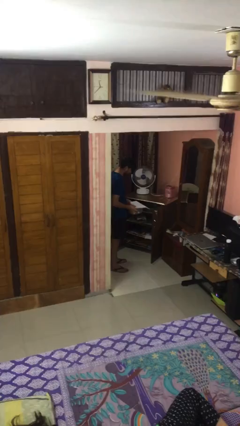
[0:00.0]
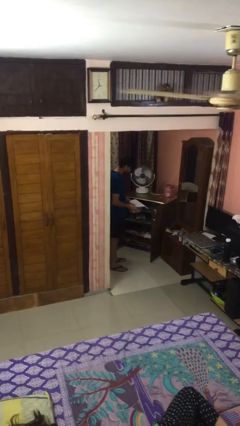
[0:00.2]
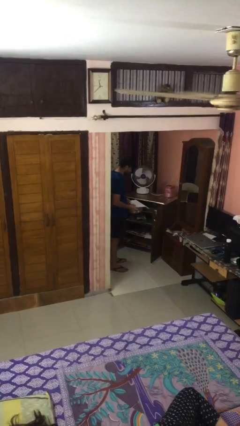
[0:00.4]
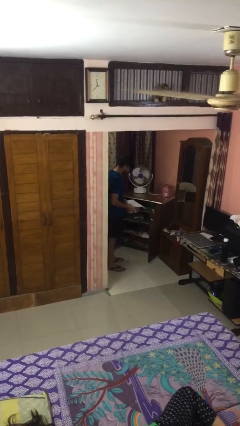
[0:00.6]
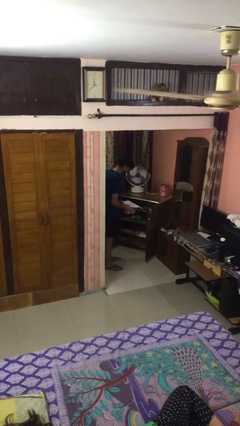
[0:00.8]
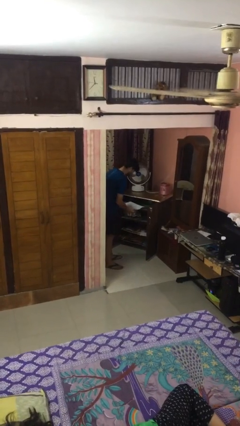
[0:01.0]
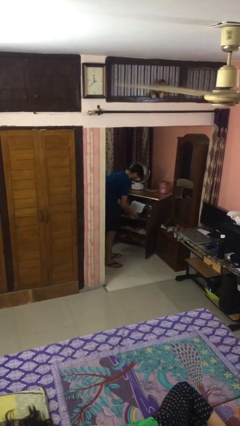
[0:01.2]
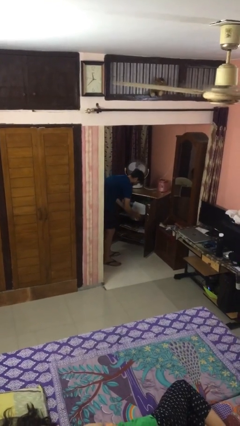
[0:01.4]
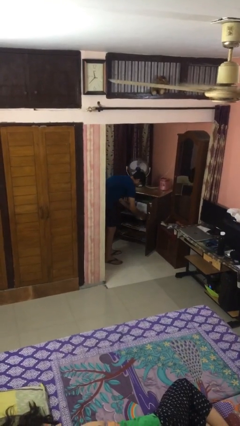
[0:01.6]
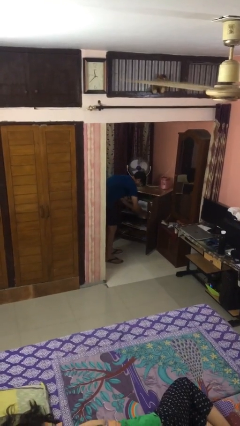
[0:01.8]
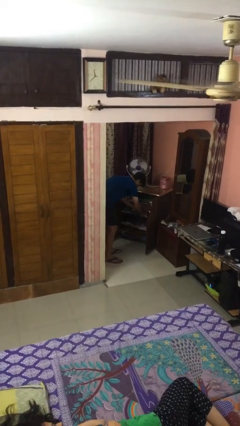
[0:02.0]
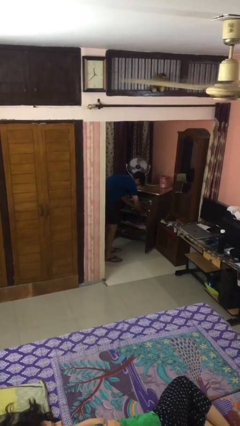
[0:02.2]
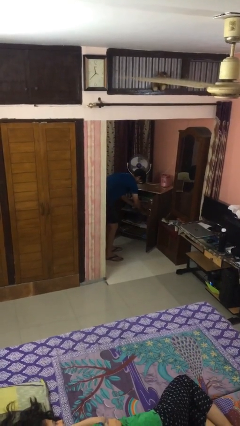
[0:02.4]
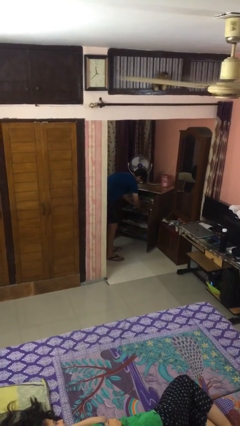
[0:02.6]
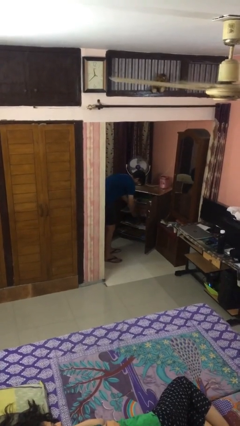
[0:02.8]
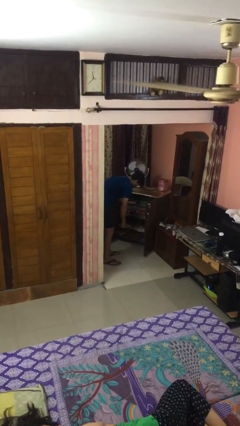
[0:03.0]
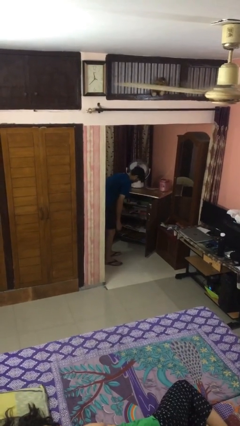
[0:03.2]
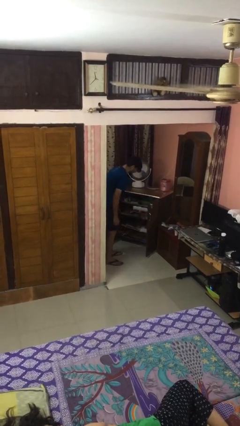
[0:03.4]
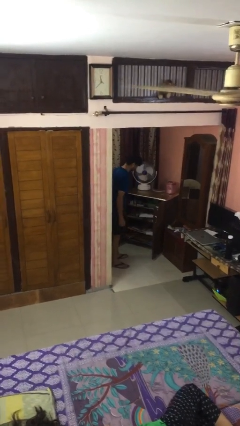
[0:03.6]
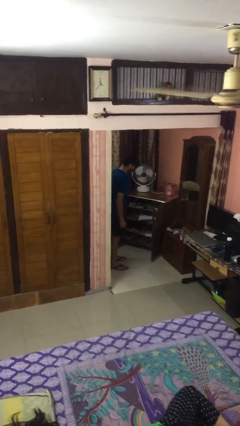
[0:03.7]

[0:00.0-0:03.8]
person puts down object into cabinet

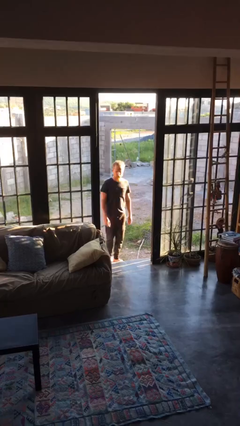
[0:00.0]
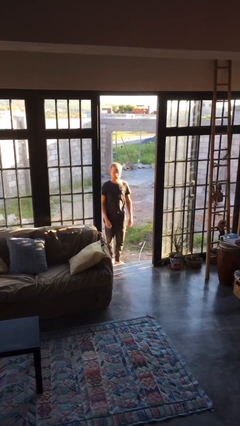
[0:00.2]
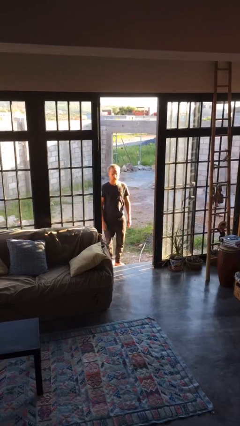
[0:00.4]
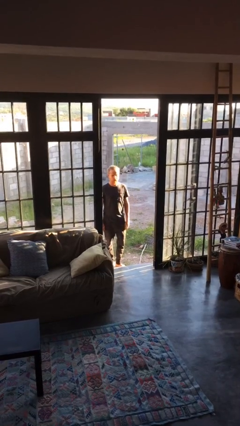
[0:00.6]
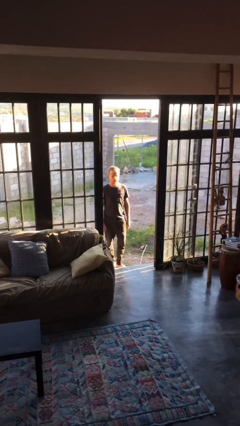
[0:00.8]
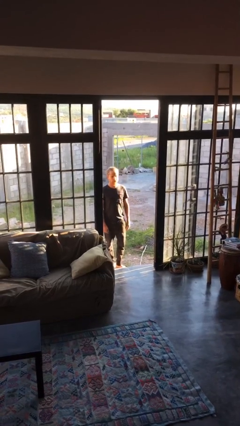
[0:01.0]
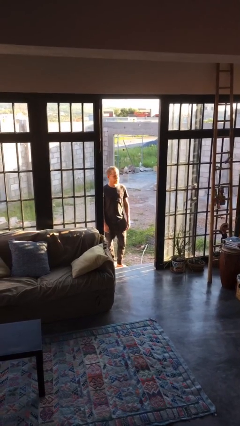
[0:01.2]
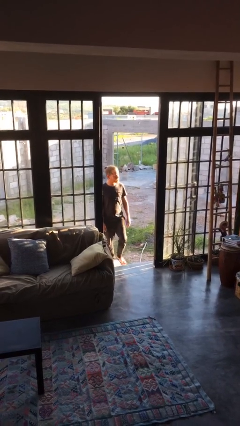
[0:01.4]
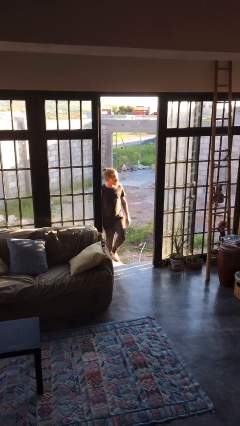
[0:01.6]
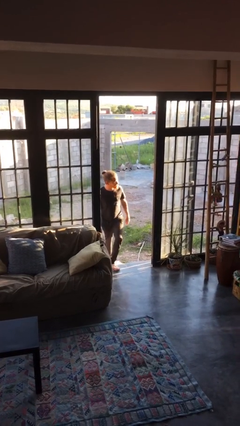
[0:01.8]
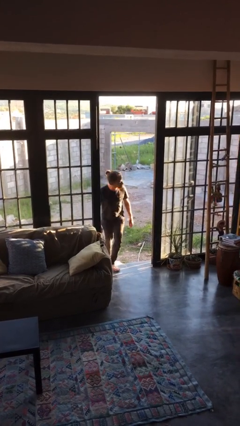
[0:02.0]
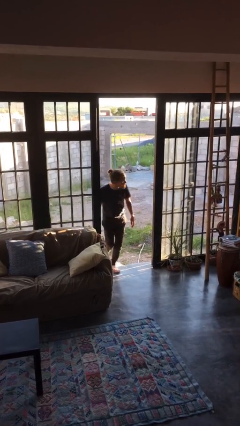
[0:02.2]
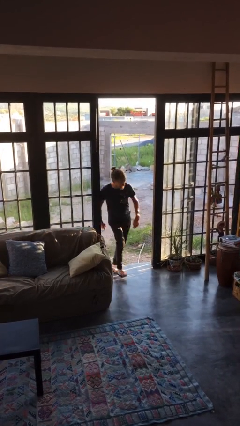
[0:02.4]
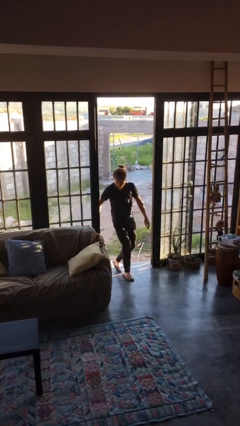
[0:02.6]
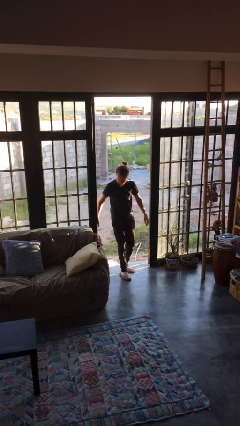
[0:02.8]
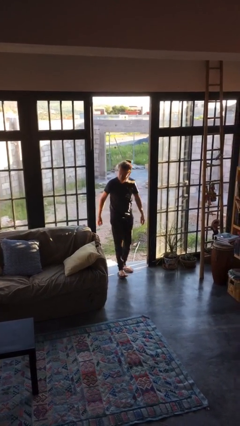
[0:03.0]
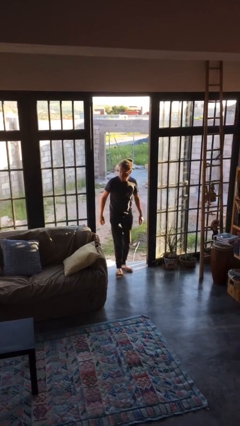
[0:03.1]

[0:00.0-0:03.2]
person bumps into wall

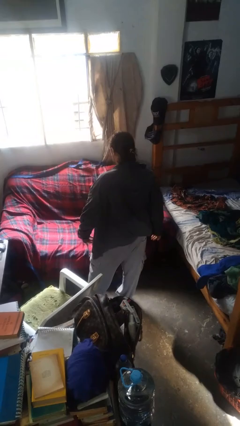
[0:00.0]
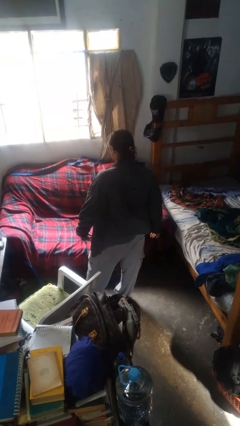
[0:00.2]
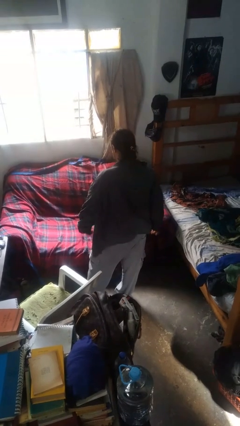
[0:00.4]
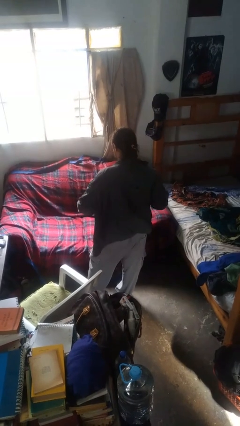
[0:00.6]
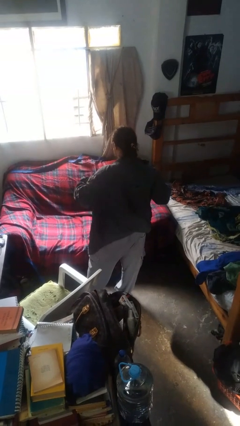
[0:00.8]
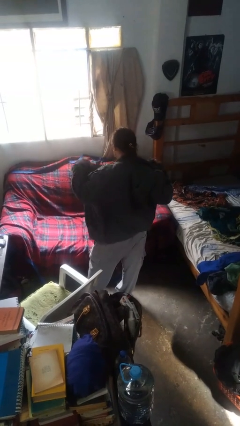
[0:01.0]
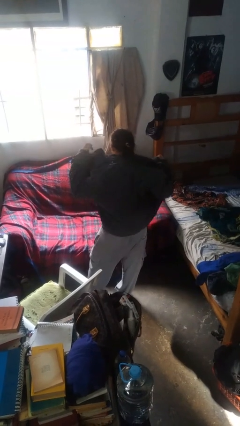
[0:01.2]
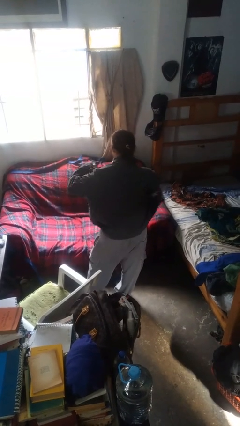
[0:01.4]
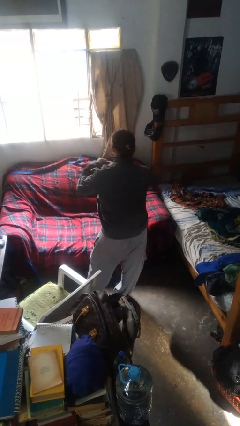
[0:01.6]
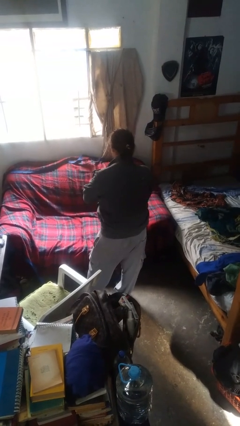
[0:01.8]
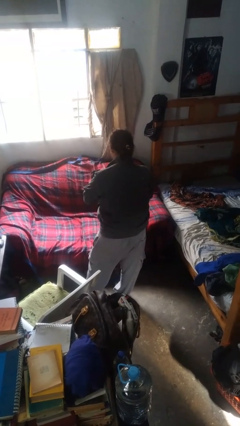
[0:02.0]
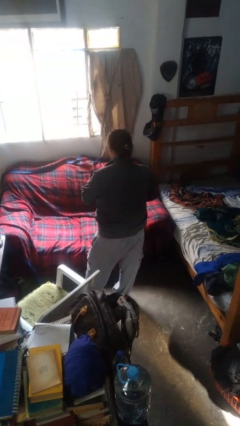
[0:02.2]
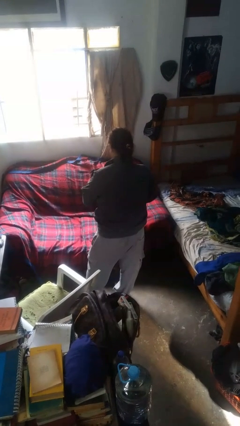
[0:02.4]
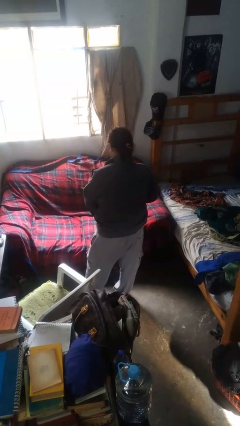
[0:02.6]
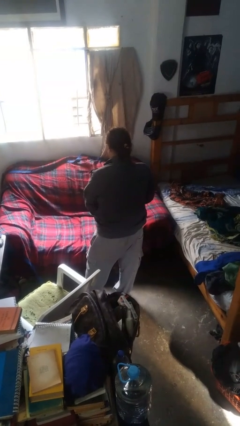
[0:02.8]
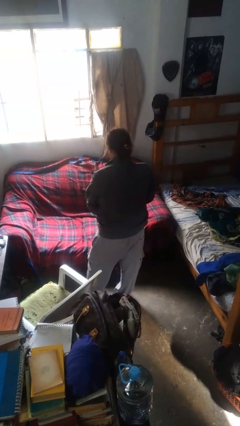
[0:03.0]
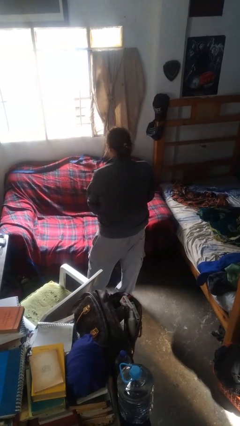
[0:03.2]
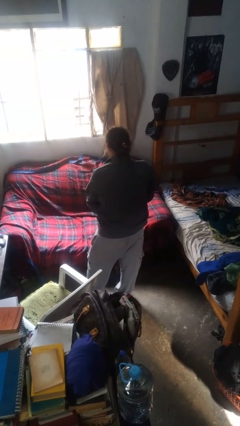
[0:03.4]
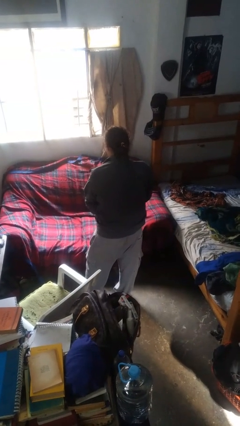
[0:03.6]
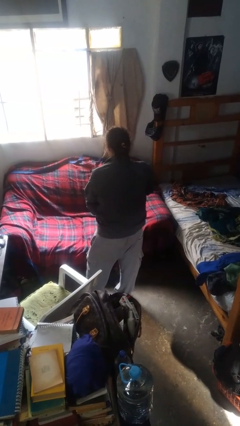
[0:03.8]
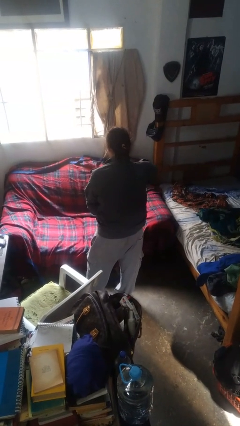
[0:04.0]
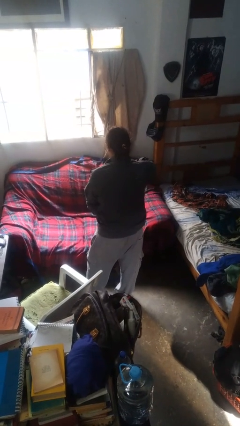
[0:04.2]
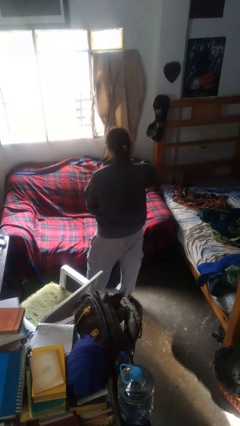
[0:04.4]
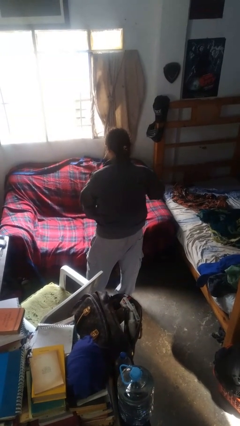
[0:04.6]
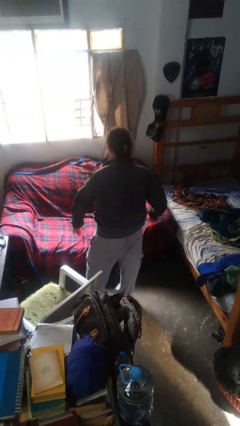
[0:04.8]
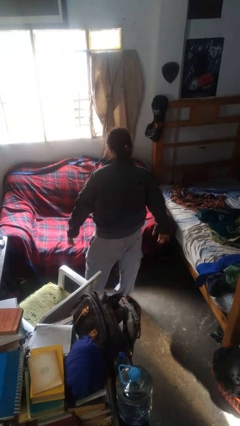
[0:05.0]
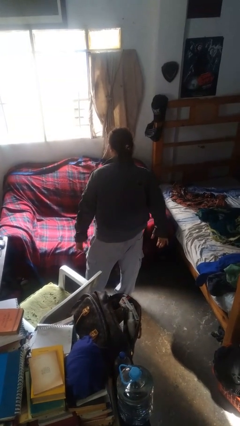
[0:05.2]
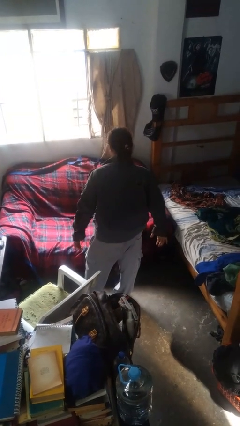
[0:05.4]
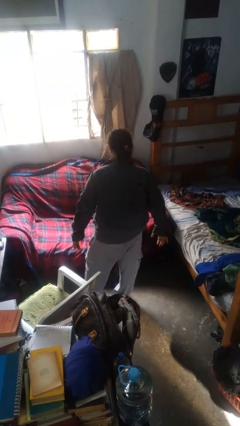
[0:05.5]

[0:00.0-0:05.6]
person zips up jacket

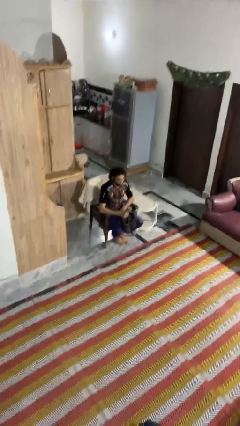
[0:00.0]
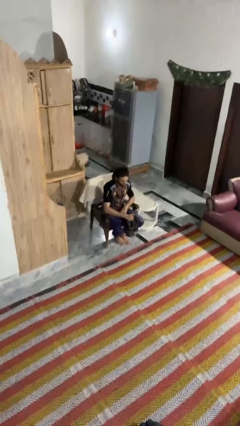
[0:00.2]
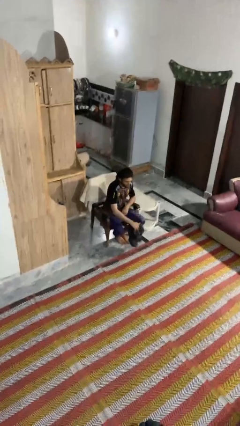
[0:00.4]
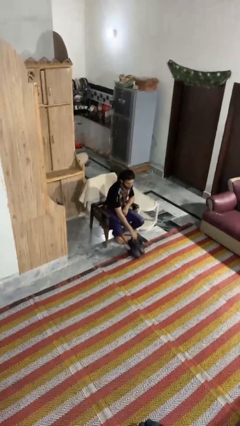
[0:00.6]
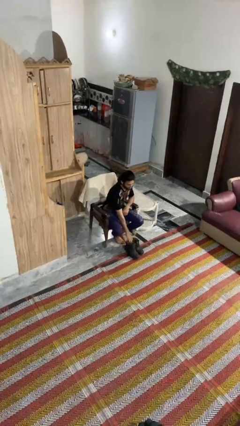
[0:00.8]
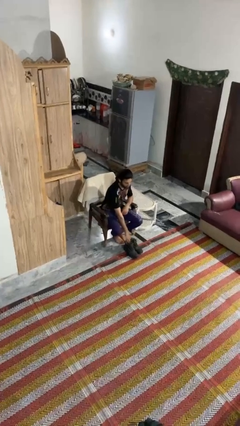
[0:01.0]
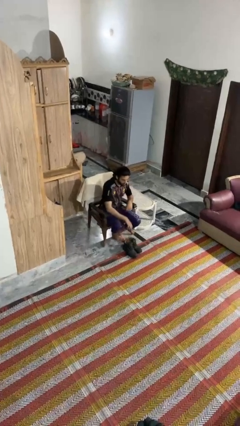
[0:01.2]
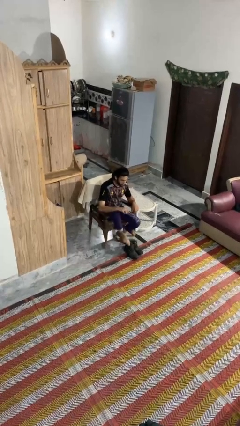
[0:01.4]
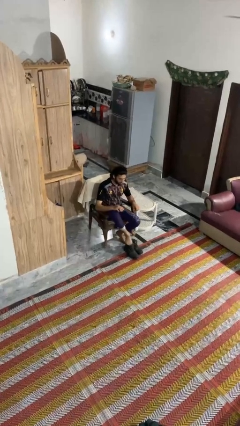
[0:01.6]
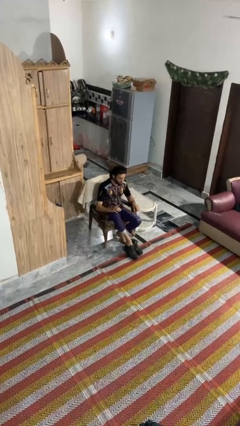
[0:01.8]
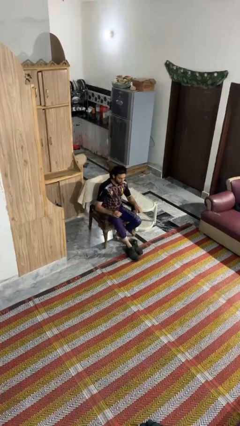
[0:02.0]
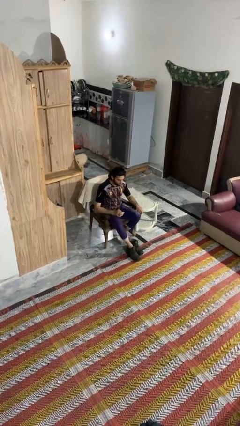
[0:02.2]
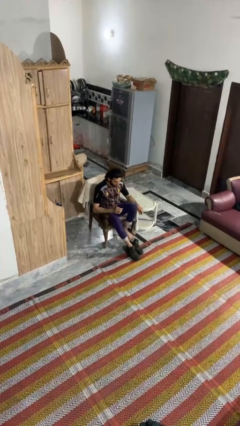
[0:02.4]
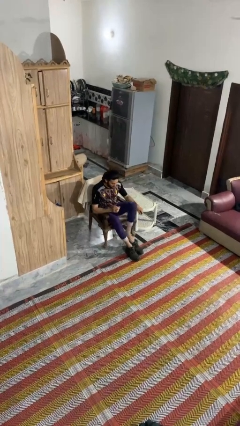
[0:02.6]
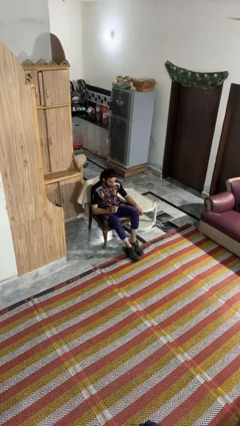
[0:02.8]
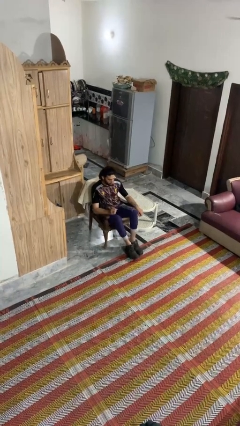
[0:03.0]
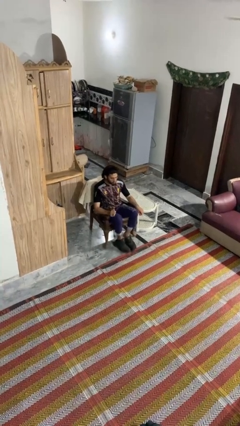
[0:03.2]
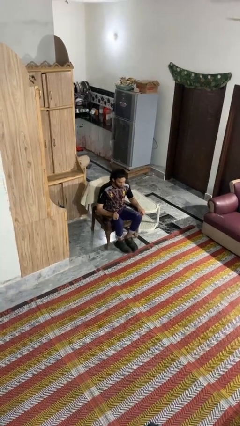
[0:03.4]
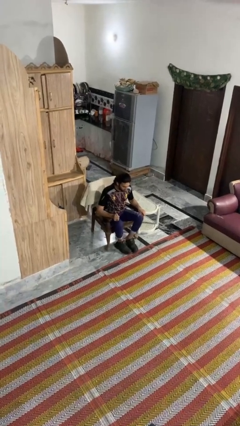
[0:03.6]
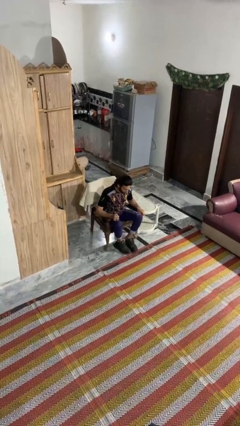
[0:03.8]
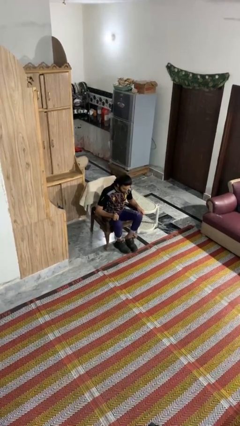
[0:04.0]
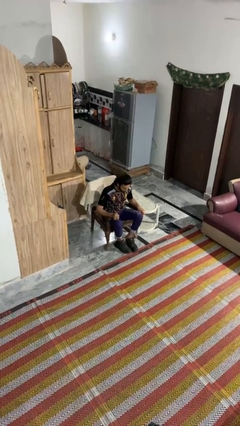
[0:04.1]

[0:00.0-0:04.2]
person puts on boots

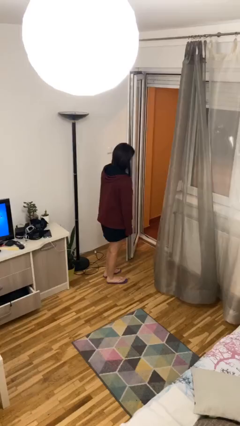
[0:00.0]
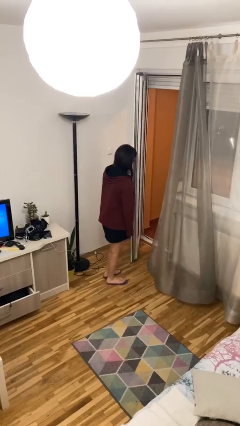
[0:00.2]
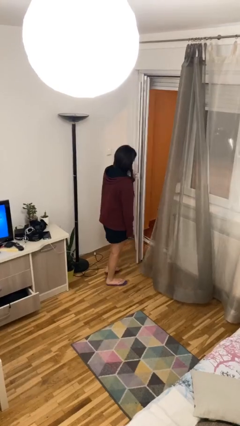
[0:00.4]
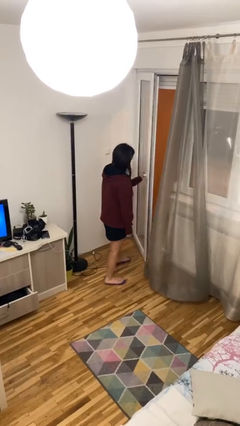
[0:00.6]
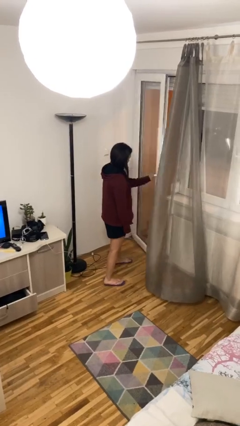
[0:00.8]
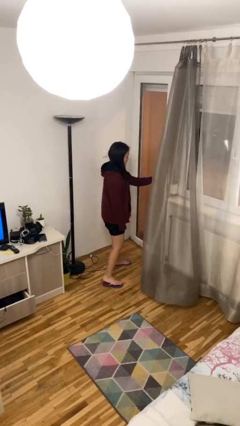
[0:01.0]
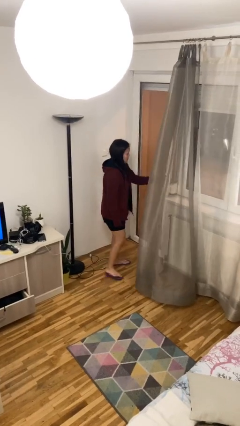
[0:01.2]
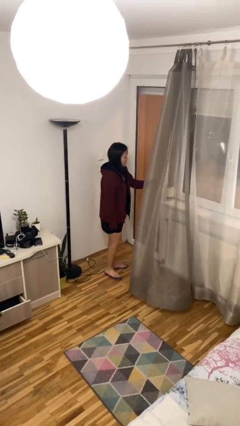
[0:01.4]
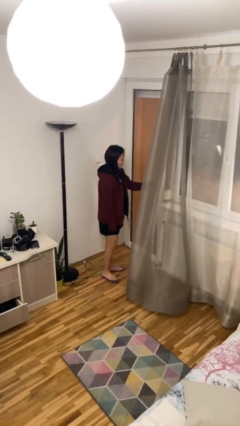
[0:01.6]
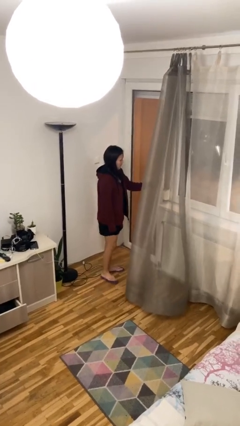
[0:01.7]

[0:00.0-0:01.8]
person closes facility door
